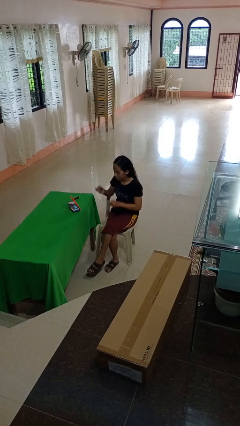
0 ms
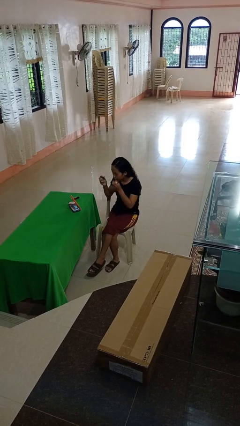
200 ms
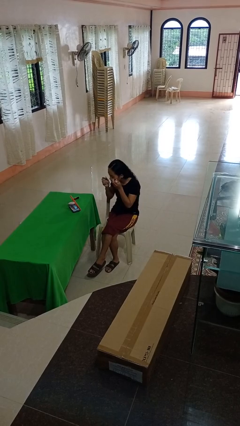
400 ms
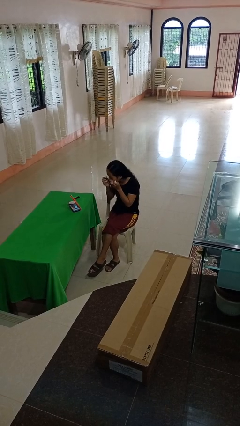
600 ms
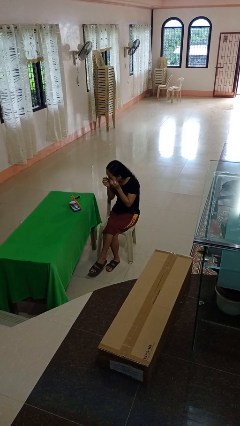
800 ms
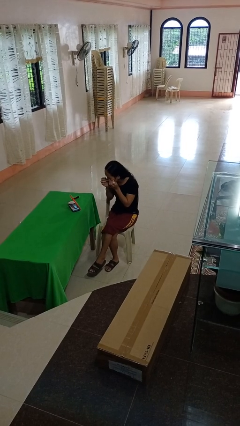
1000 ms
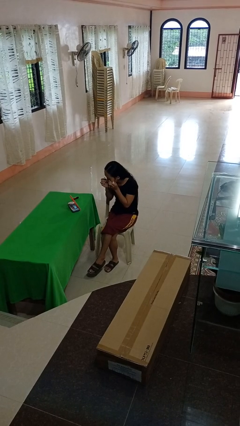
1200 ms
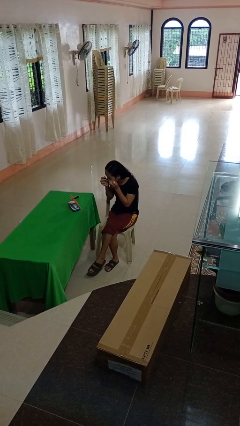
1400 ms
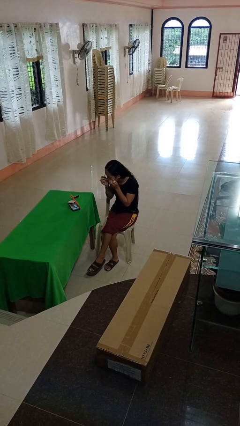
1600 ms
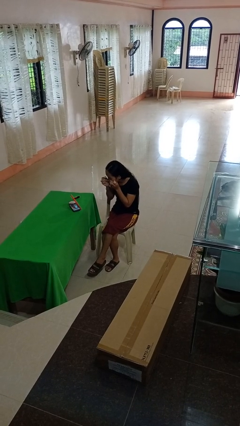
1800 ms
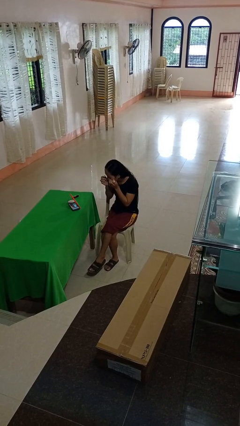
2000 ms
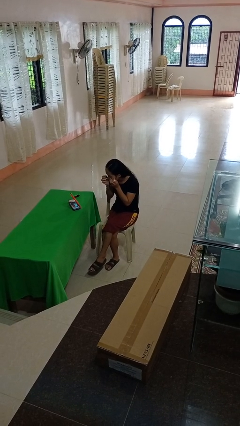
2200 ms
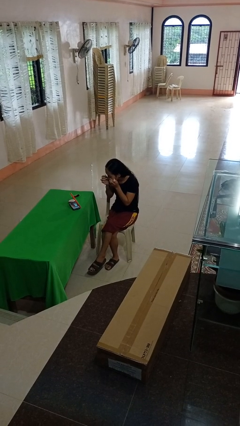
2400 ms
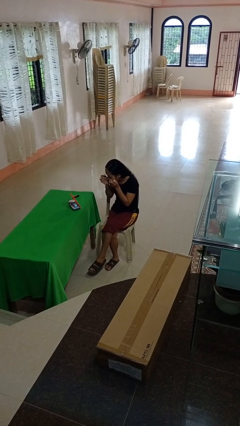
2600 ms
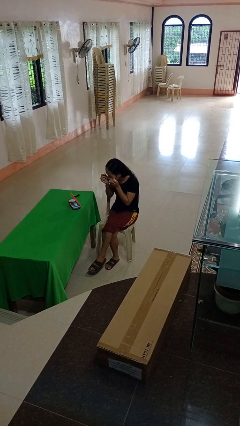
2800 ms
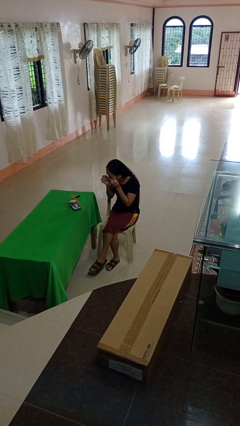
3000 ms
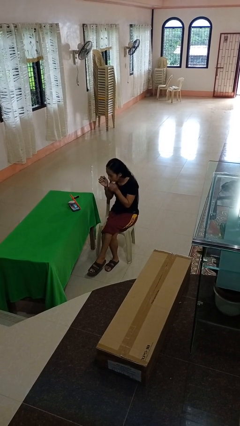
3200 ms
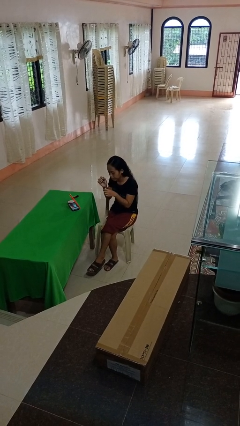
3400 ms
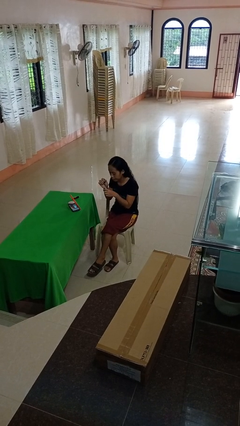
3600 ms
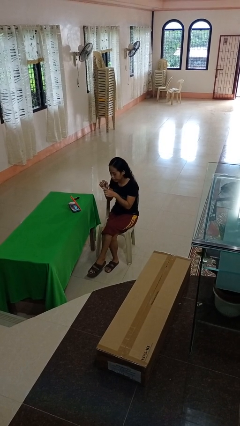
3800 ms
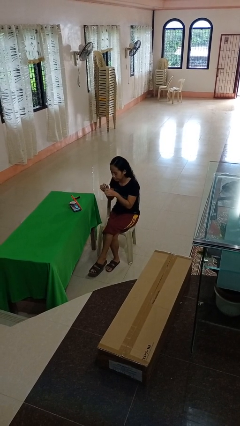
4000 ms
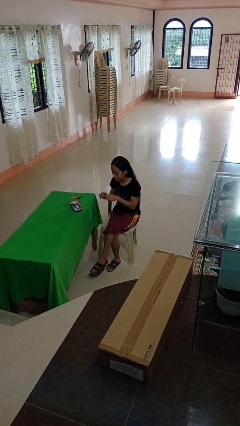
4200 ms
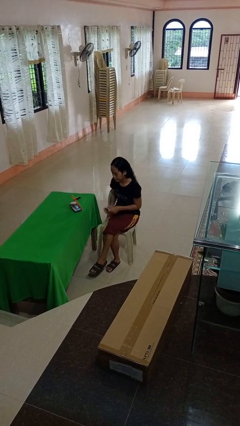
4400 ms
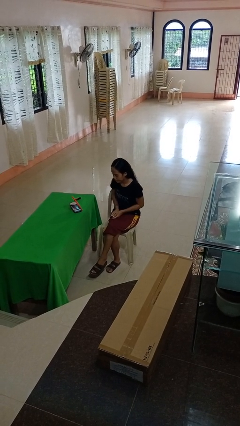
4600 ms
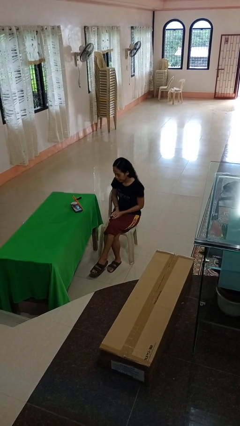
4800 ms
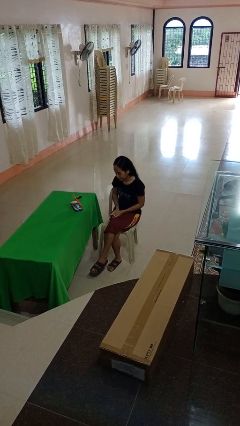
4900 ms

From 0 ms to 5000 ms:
person applies eye makeup

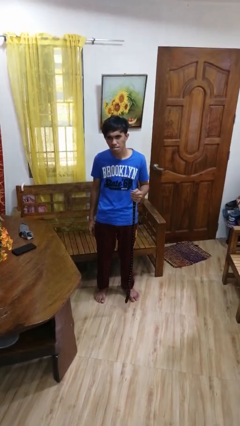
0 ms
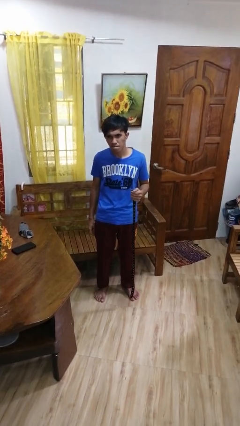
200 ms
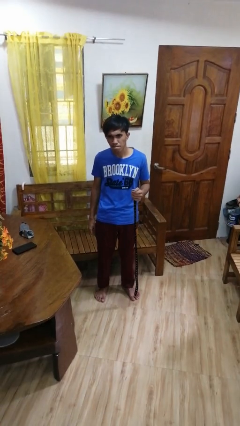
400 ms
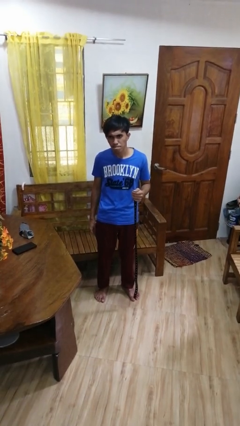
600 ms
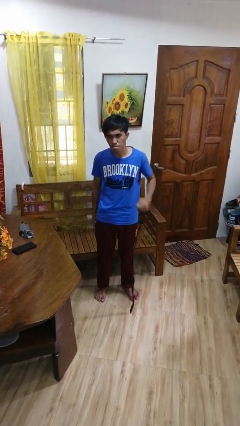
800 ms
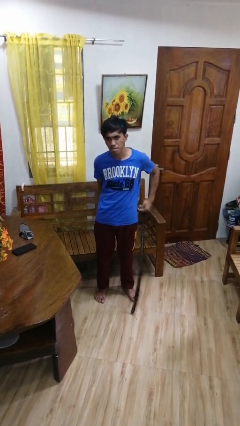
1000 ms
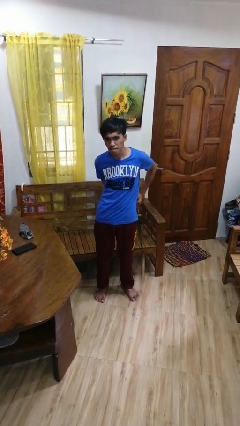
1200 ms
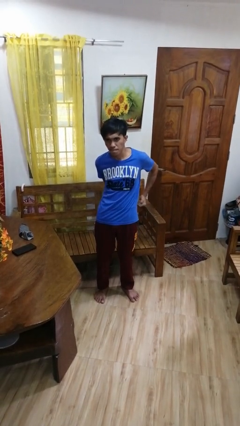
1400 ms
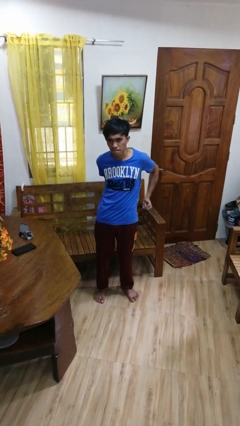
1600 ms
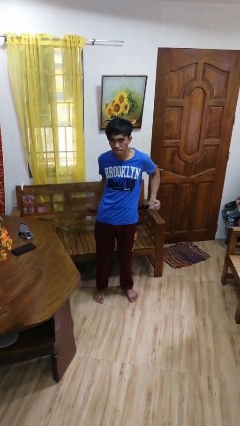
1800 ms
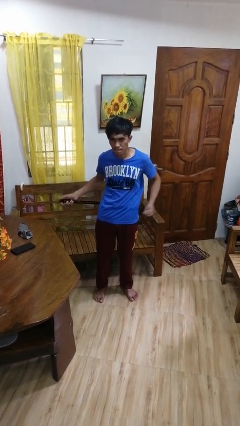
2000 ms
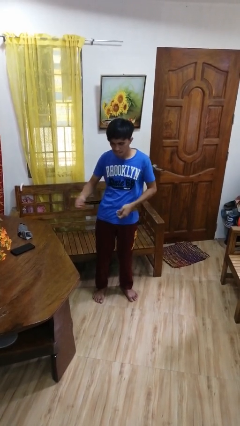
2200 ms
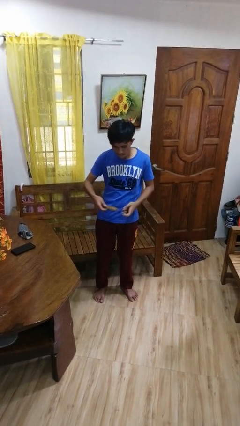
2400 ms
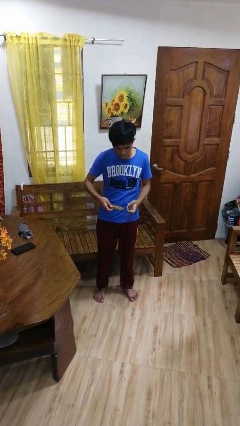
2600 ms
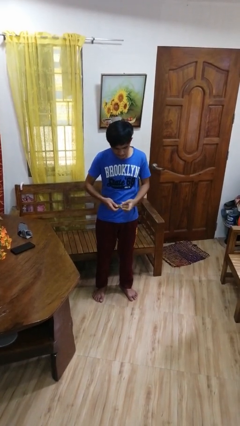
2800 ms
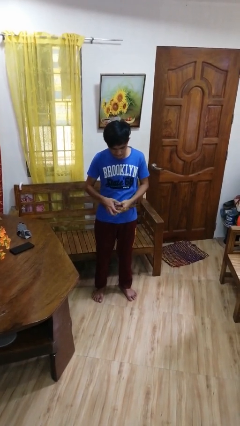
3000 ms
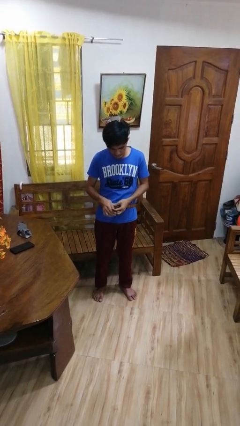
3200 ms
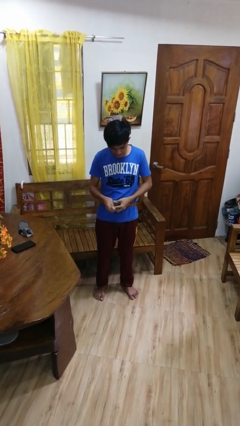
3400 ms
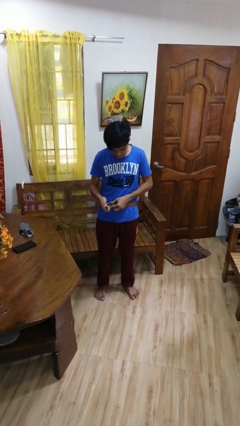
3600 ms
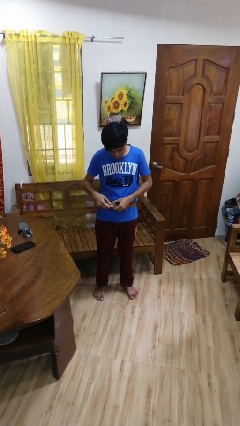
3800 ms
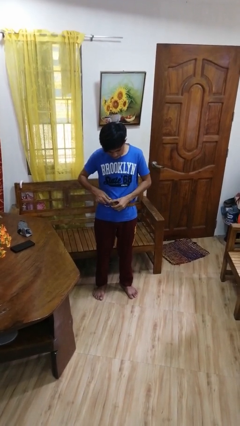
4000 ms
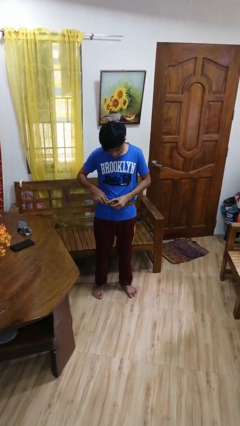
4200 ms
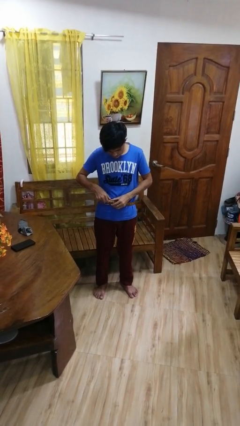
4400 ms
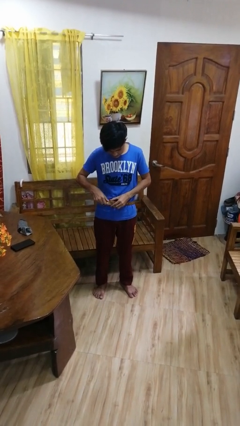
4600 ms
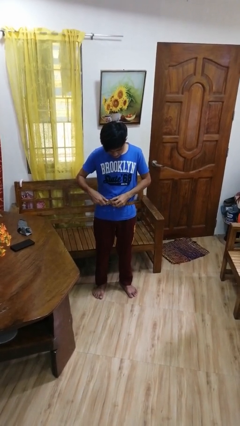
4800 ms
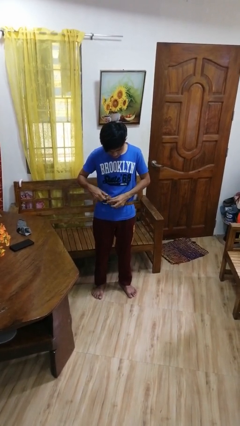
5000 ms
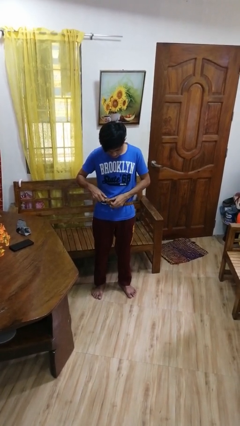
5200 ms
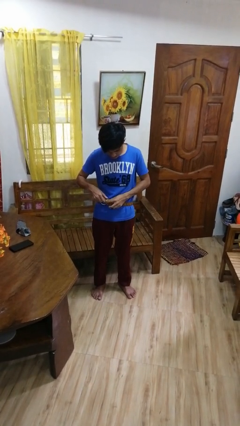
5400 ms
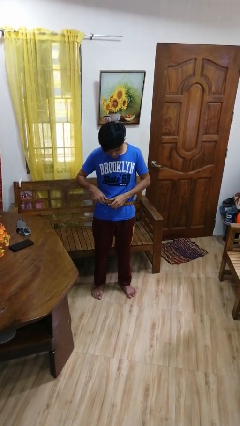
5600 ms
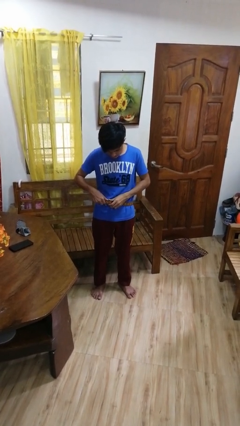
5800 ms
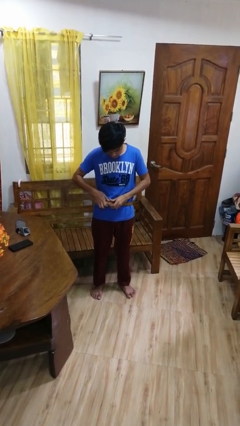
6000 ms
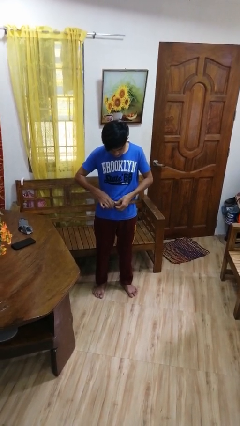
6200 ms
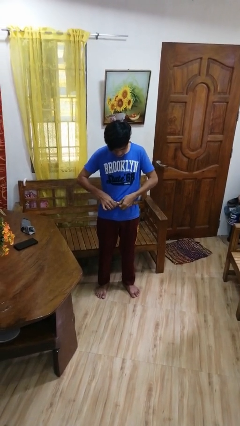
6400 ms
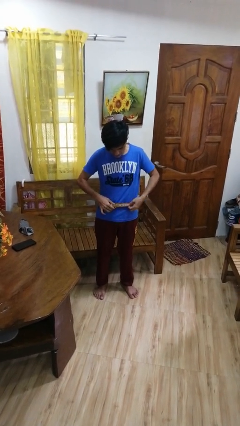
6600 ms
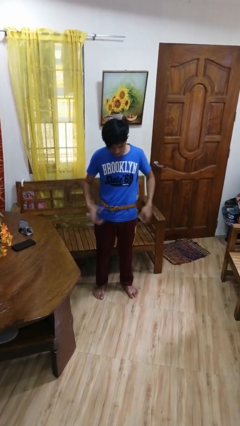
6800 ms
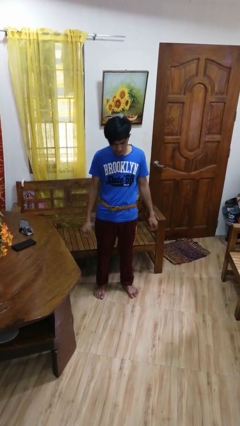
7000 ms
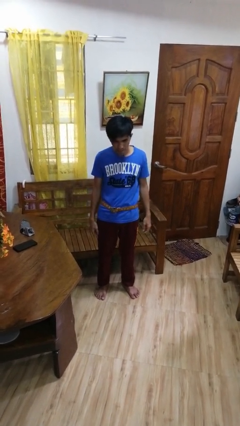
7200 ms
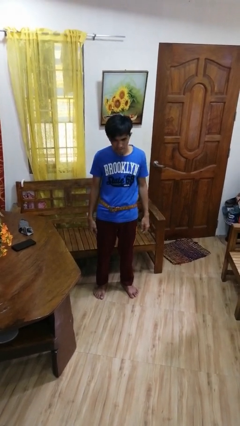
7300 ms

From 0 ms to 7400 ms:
person puts on belt

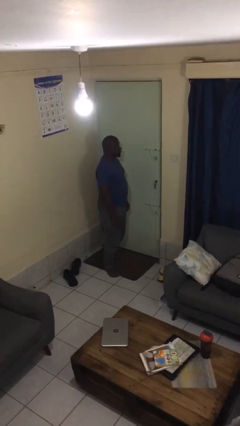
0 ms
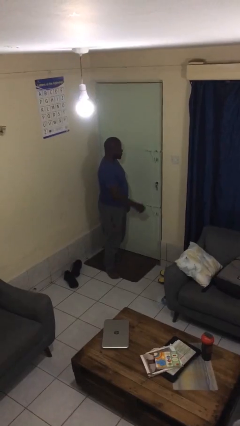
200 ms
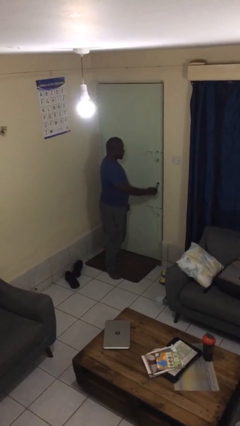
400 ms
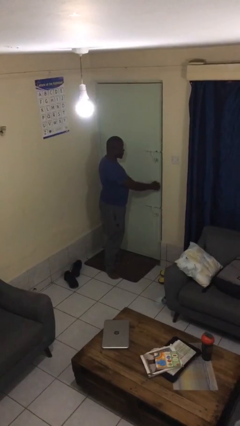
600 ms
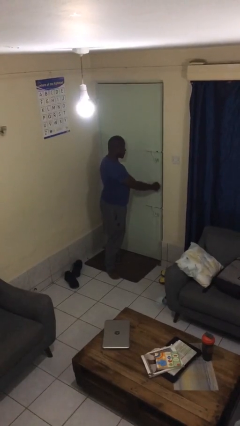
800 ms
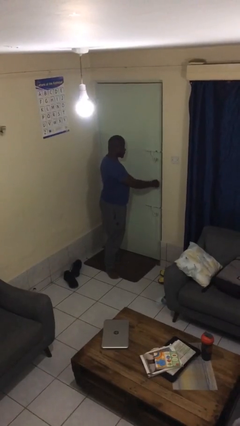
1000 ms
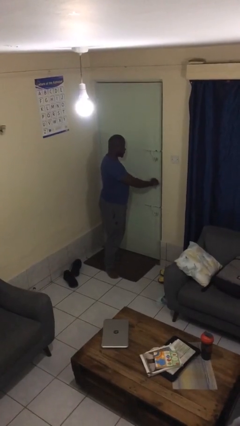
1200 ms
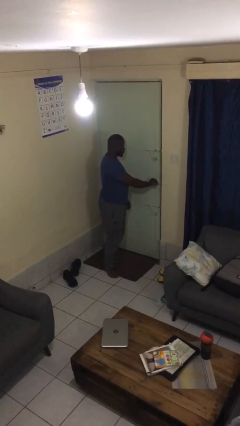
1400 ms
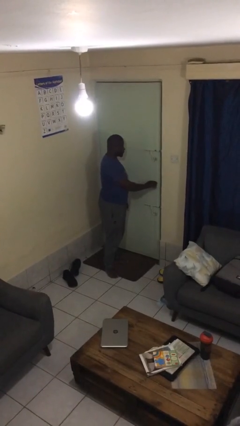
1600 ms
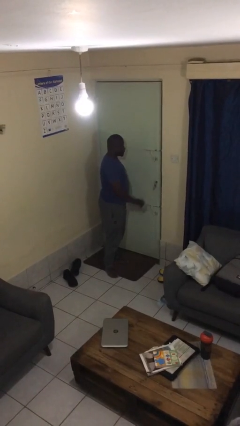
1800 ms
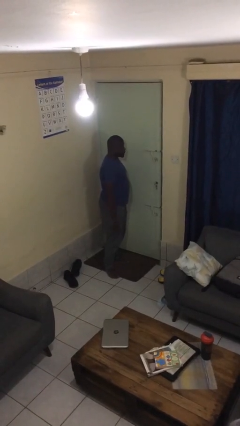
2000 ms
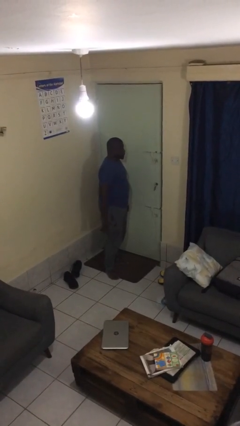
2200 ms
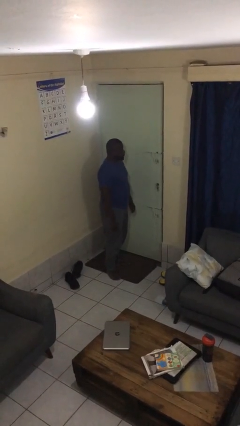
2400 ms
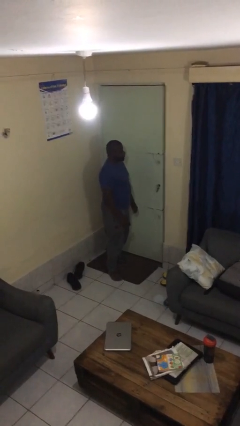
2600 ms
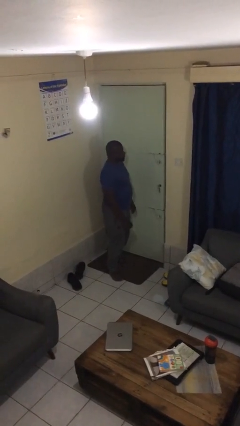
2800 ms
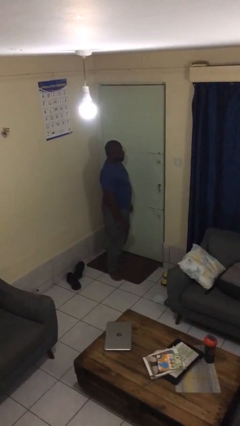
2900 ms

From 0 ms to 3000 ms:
person unlocks door with keys

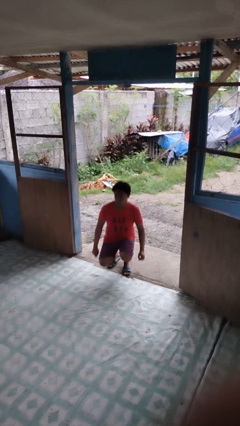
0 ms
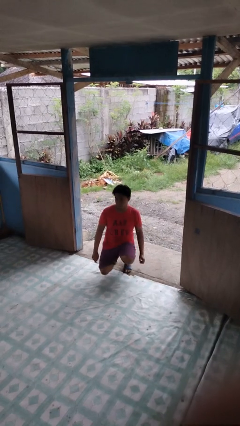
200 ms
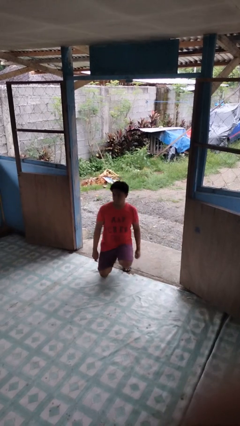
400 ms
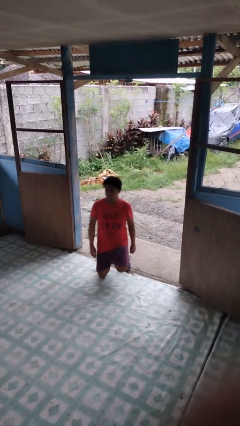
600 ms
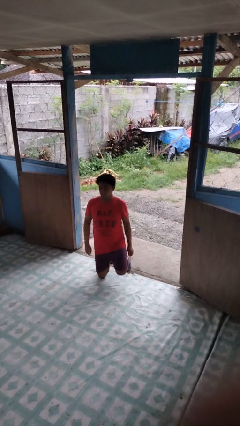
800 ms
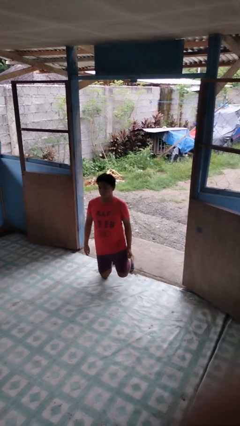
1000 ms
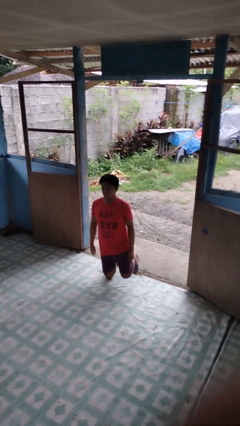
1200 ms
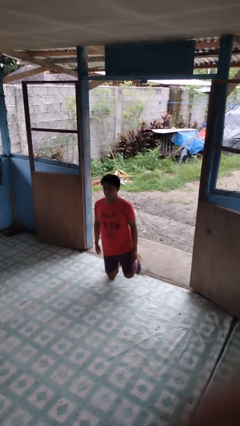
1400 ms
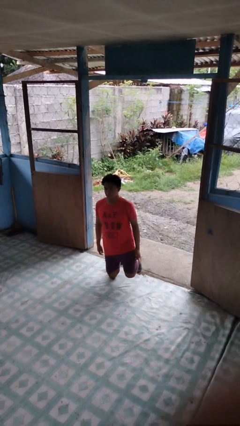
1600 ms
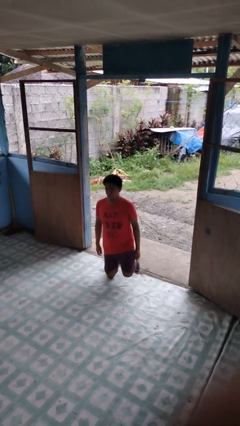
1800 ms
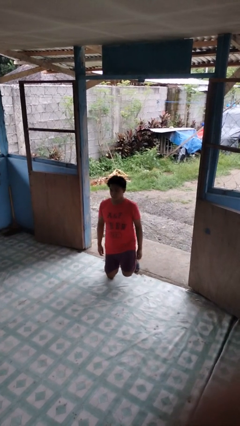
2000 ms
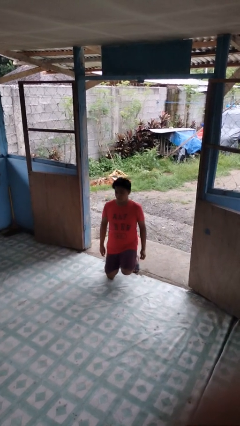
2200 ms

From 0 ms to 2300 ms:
person kneels
